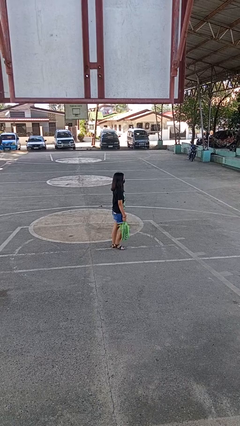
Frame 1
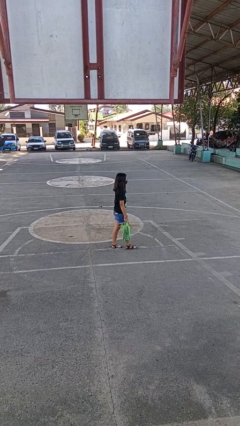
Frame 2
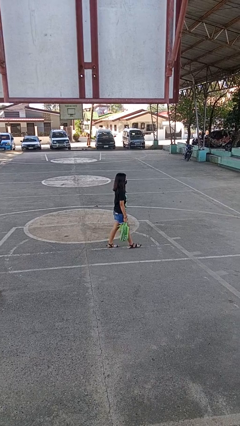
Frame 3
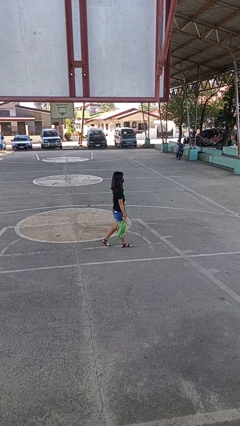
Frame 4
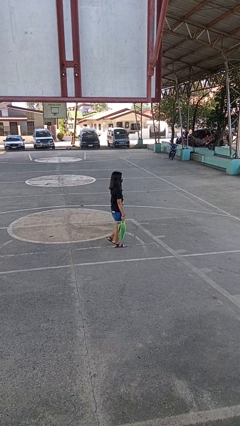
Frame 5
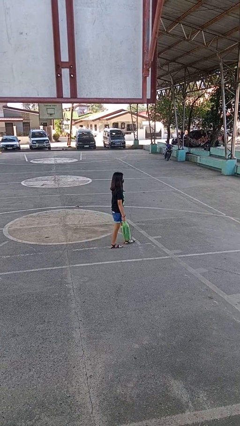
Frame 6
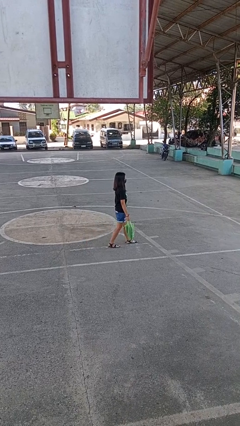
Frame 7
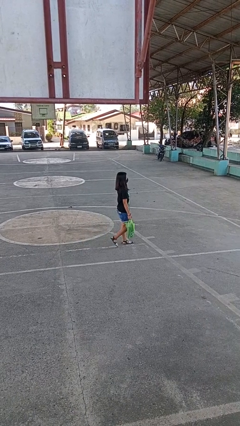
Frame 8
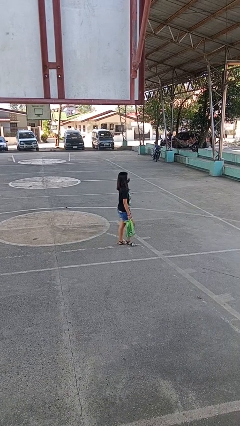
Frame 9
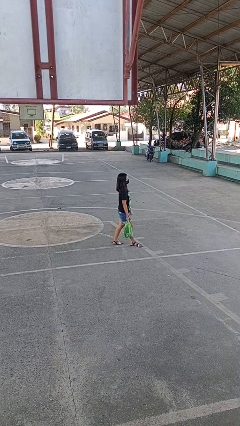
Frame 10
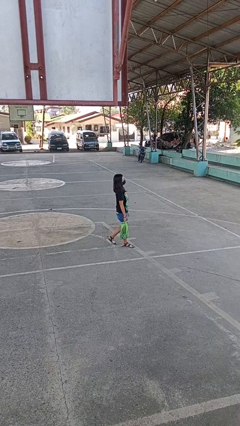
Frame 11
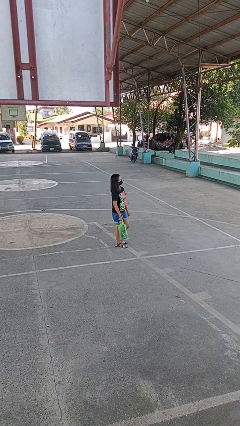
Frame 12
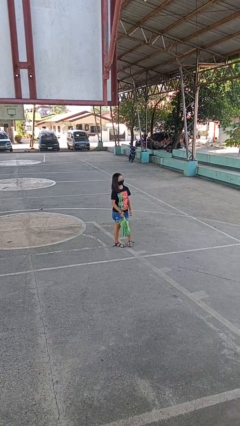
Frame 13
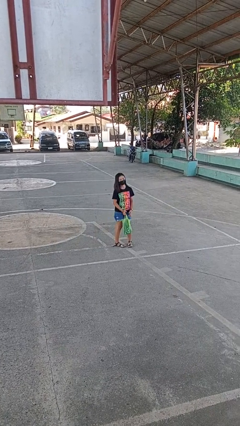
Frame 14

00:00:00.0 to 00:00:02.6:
person carries groceries

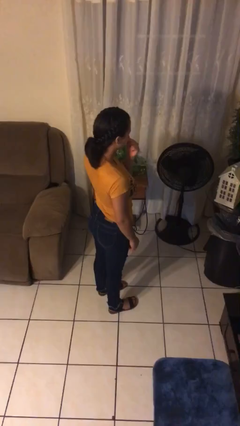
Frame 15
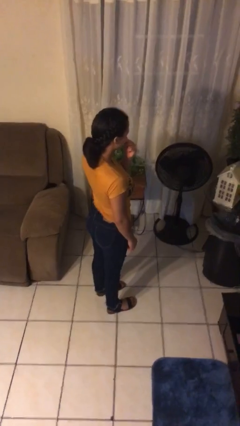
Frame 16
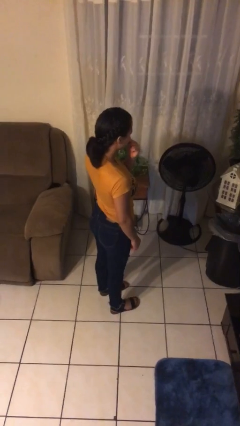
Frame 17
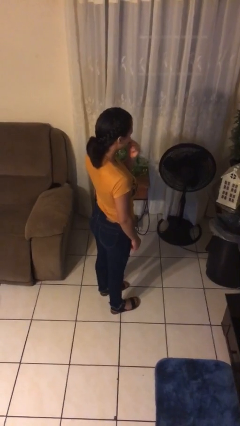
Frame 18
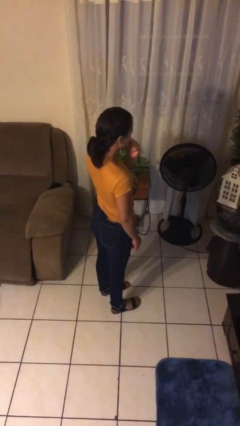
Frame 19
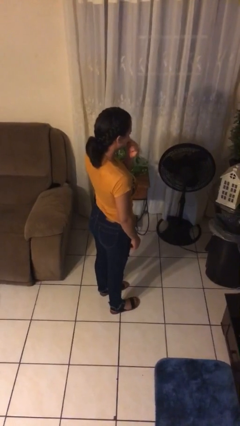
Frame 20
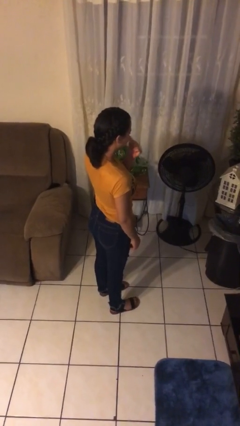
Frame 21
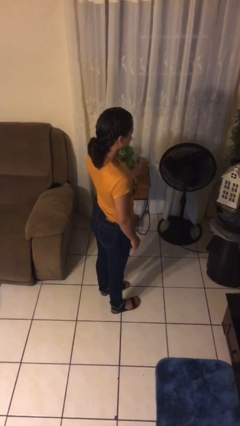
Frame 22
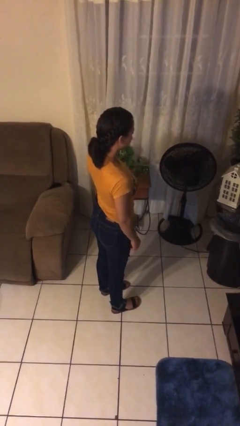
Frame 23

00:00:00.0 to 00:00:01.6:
person licks fingers

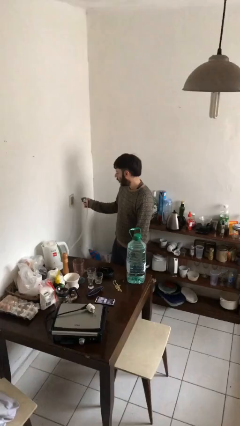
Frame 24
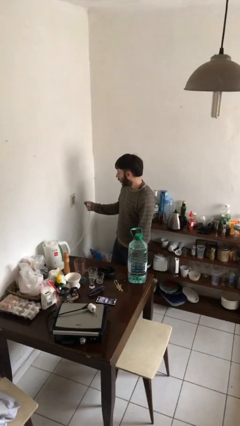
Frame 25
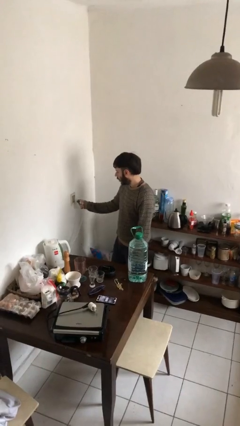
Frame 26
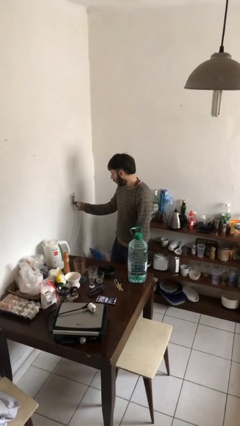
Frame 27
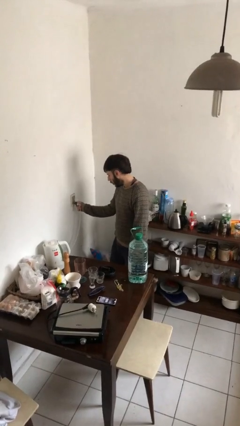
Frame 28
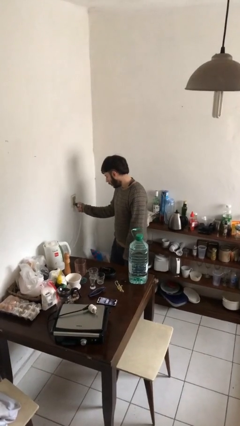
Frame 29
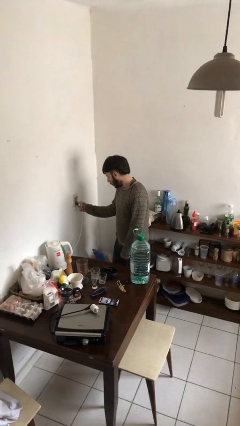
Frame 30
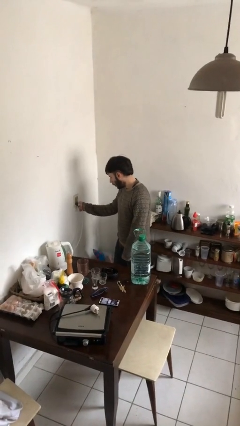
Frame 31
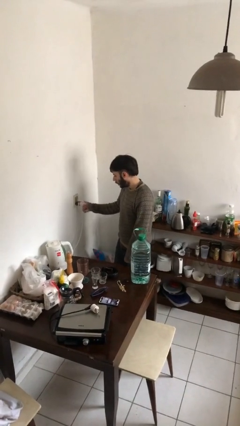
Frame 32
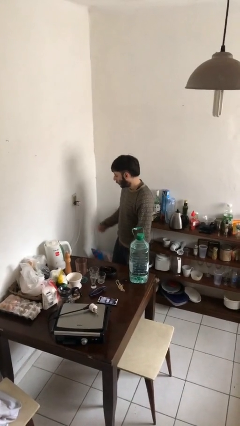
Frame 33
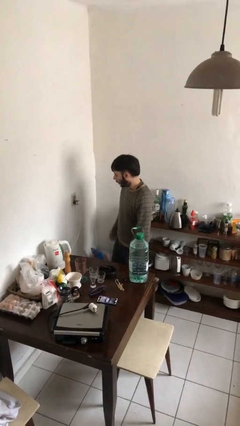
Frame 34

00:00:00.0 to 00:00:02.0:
person plugs into electrical socket

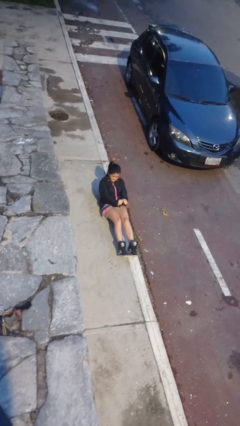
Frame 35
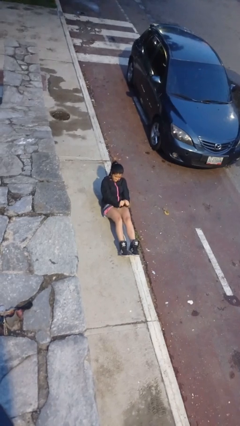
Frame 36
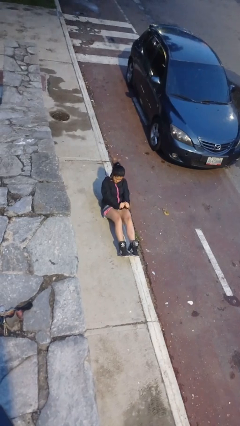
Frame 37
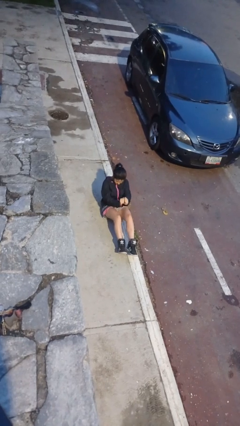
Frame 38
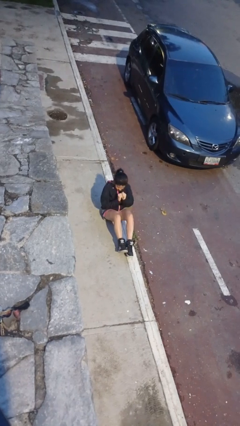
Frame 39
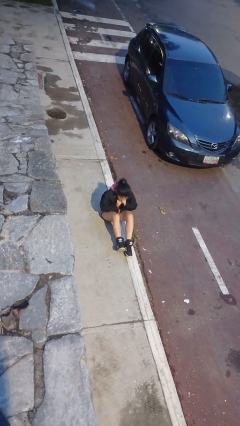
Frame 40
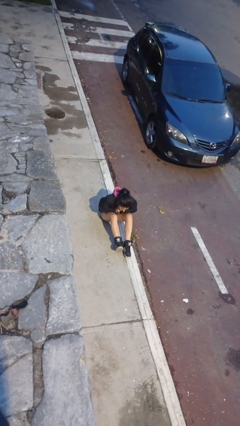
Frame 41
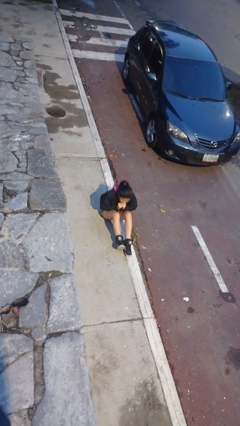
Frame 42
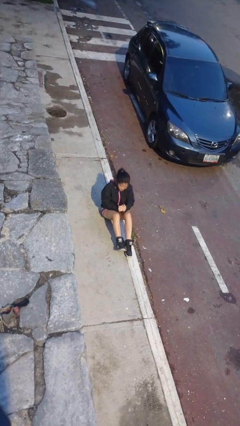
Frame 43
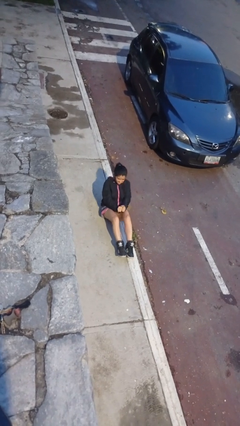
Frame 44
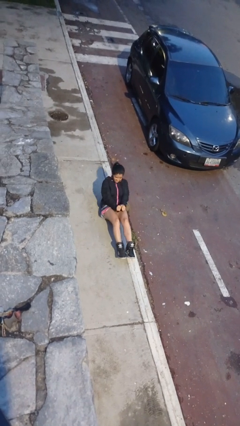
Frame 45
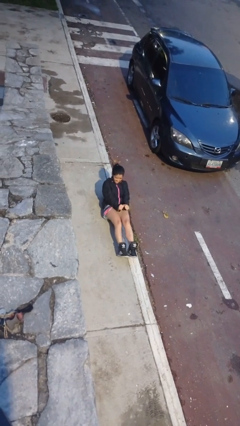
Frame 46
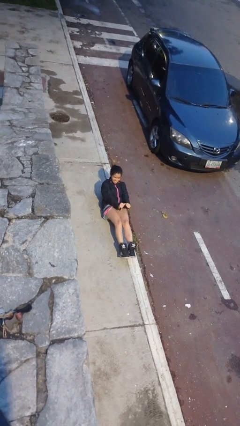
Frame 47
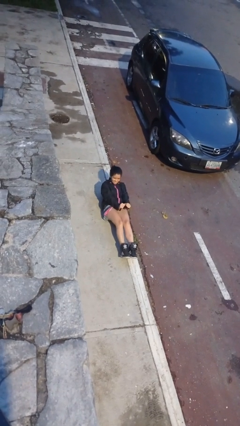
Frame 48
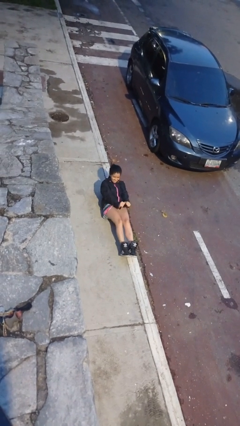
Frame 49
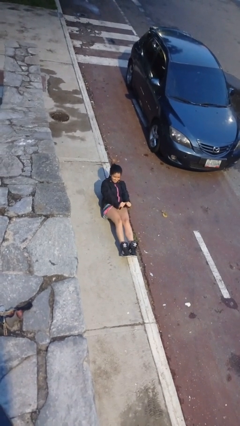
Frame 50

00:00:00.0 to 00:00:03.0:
person exercises with situp

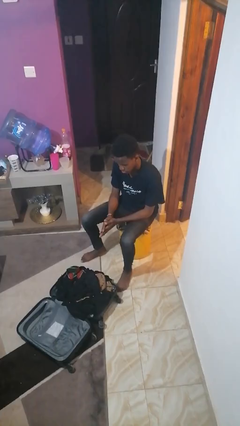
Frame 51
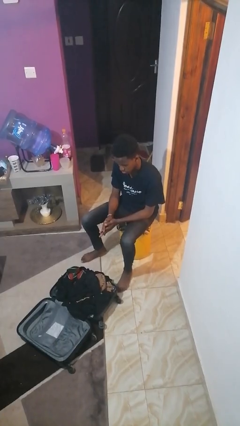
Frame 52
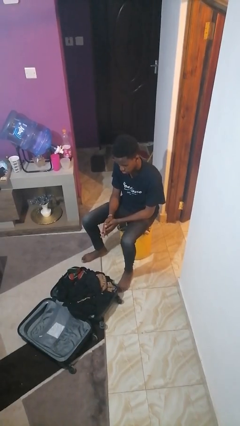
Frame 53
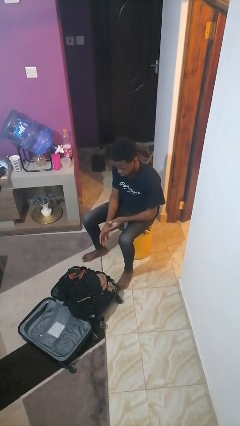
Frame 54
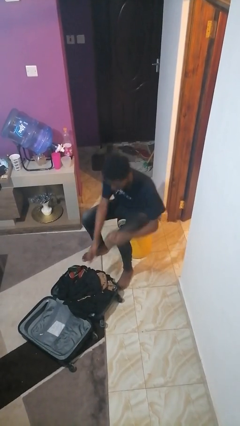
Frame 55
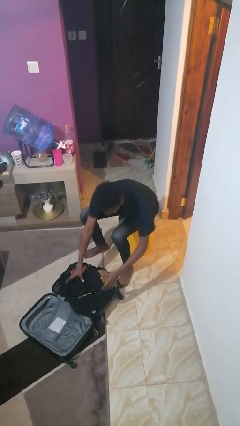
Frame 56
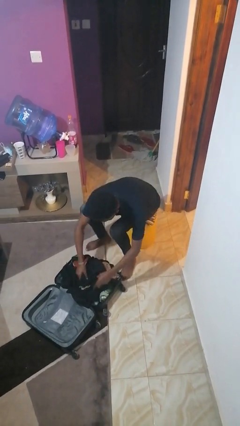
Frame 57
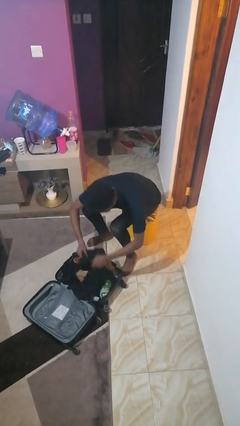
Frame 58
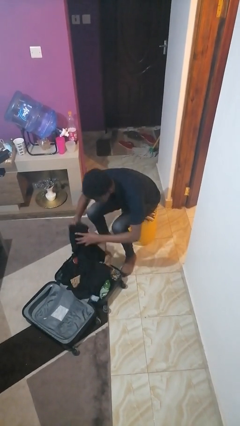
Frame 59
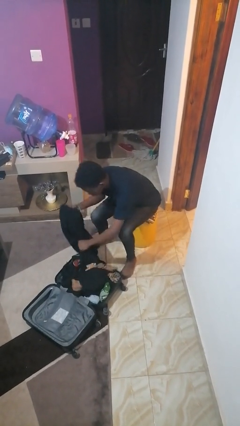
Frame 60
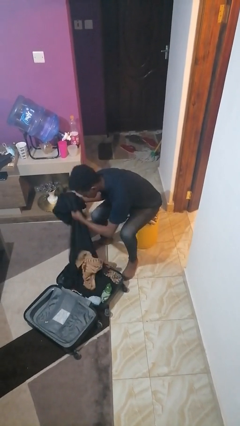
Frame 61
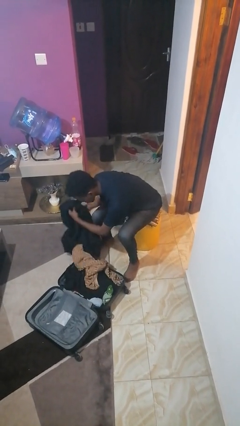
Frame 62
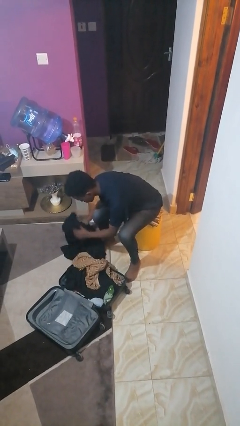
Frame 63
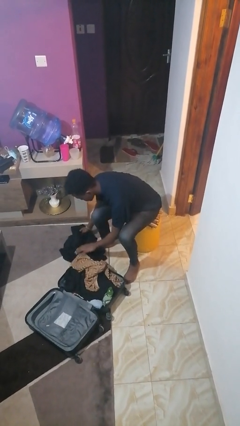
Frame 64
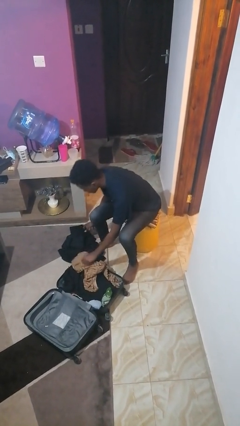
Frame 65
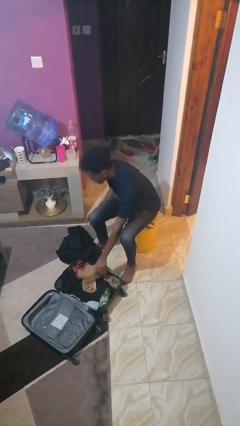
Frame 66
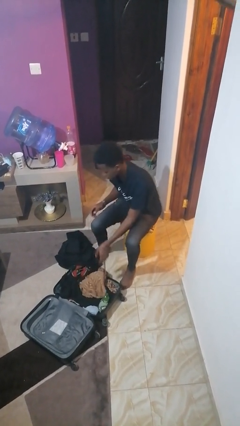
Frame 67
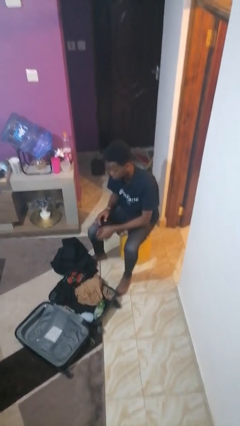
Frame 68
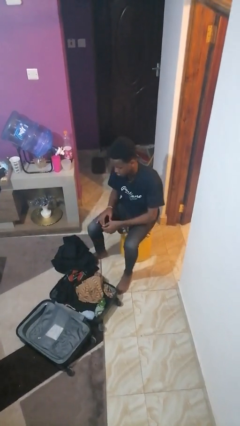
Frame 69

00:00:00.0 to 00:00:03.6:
person unloads clothes from suitcase

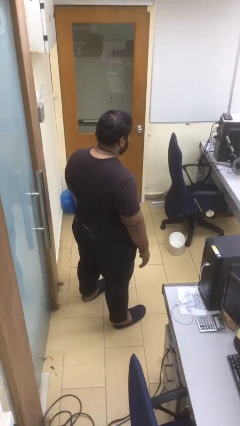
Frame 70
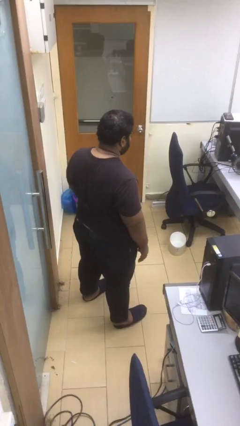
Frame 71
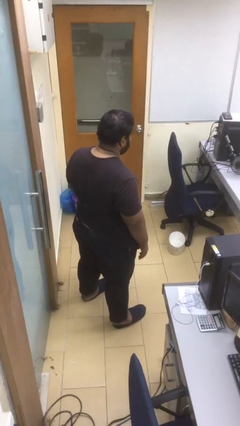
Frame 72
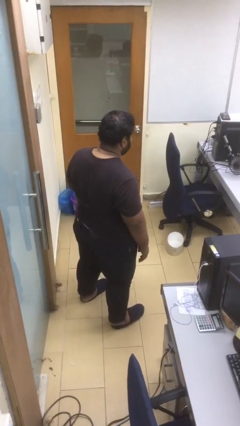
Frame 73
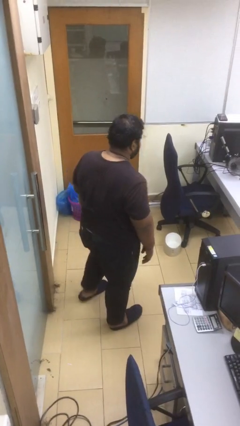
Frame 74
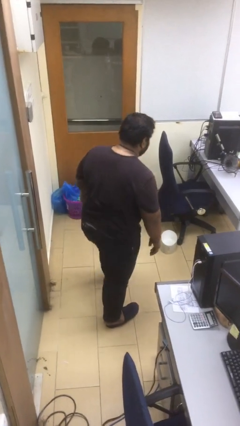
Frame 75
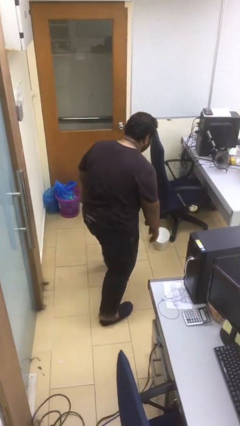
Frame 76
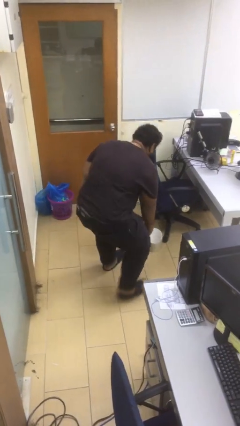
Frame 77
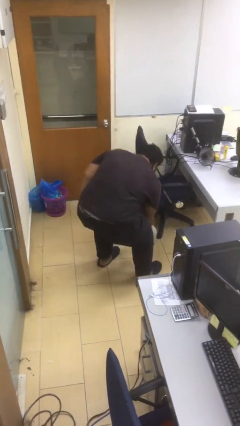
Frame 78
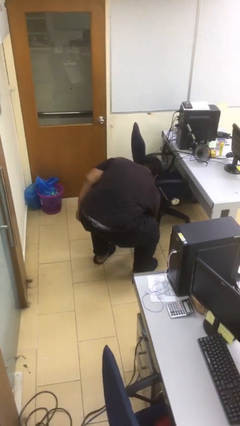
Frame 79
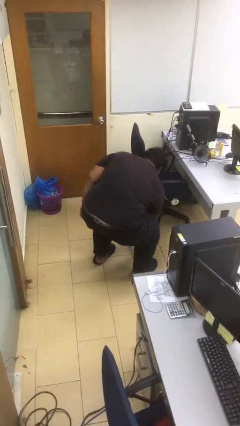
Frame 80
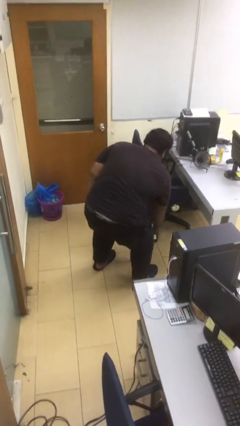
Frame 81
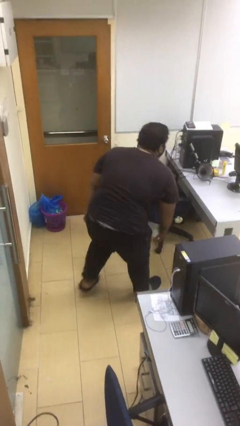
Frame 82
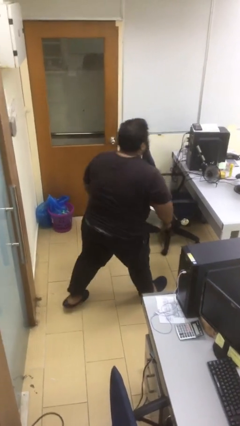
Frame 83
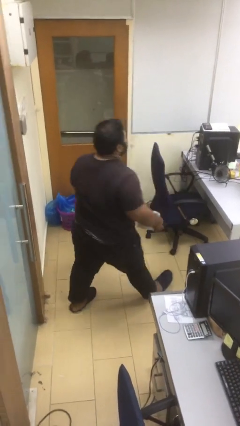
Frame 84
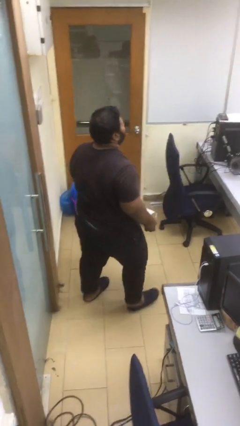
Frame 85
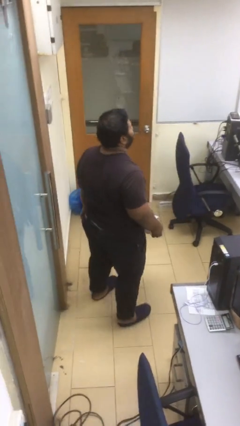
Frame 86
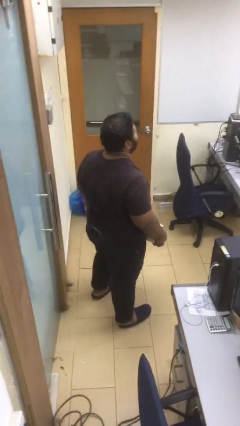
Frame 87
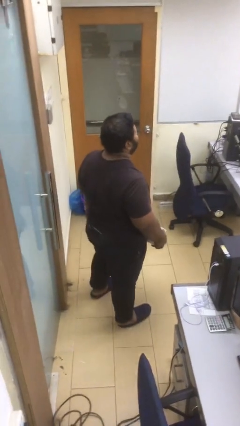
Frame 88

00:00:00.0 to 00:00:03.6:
person picks up object from floor

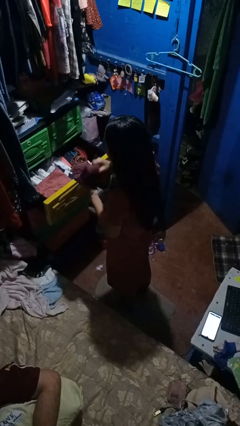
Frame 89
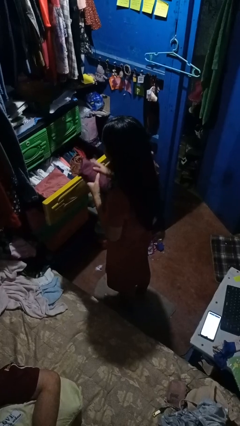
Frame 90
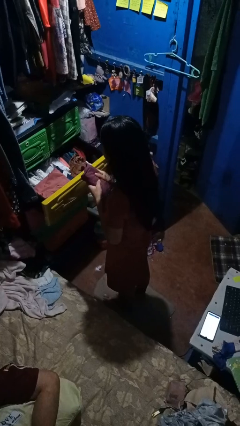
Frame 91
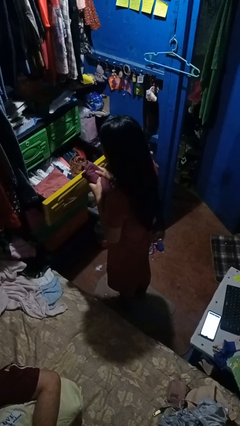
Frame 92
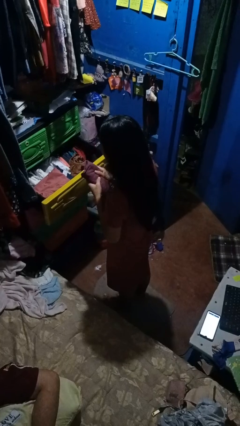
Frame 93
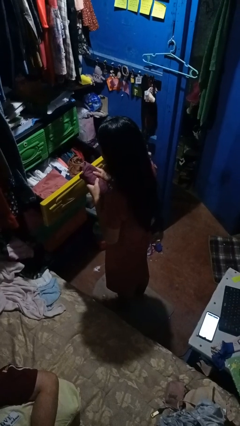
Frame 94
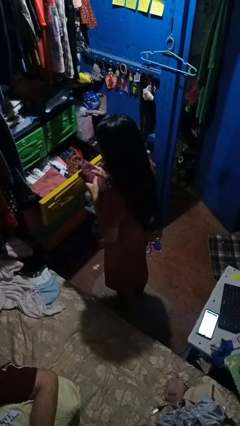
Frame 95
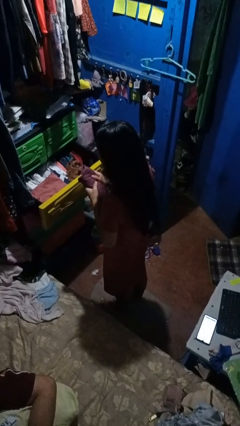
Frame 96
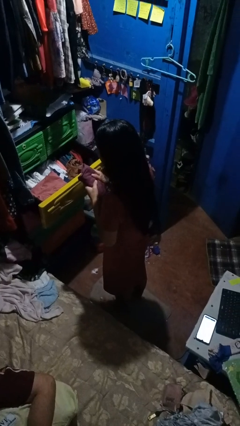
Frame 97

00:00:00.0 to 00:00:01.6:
person takes clothes from dresser
